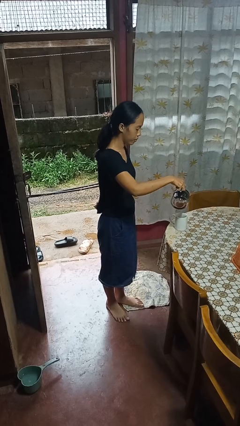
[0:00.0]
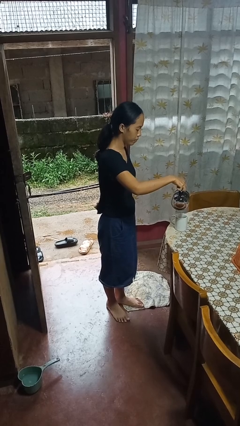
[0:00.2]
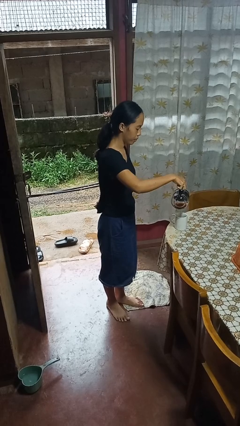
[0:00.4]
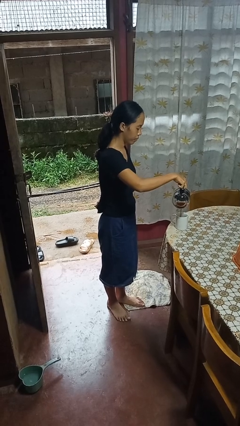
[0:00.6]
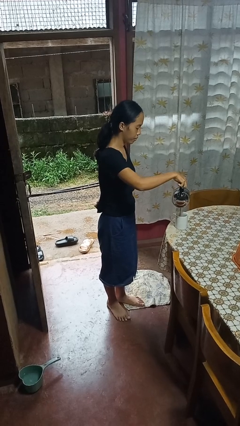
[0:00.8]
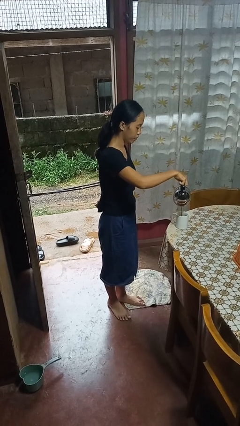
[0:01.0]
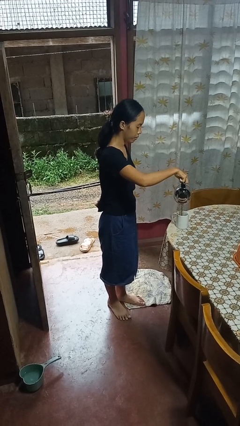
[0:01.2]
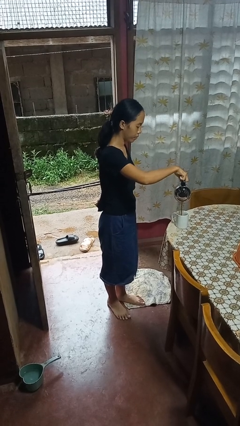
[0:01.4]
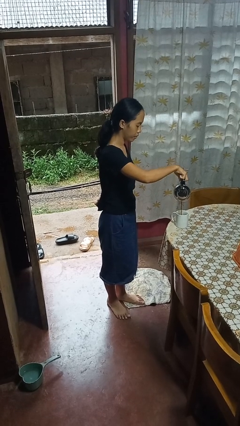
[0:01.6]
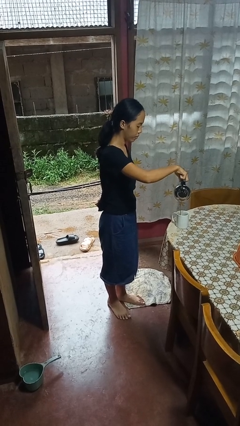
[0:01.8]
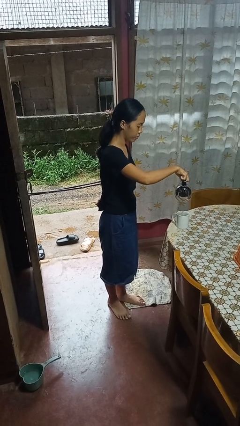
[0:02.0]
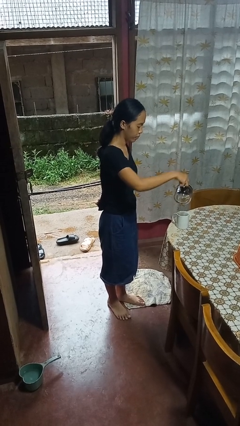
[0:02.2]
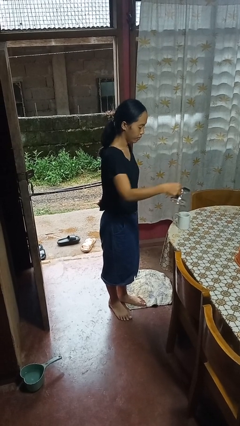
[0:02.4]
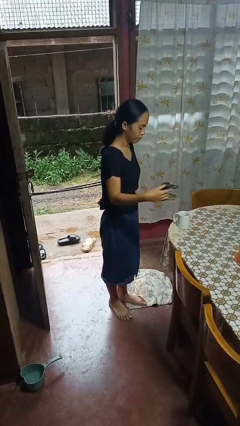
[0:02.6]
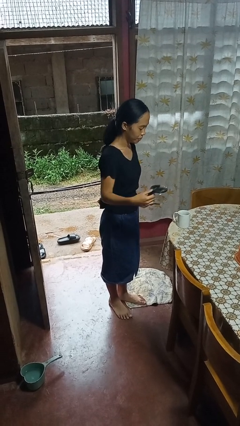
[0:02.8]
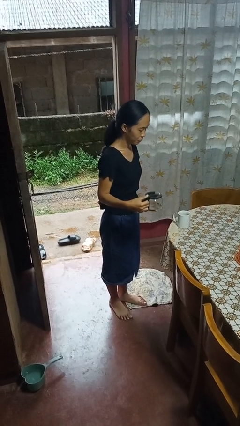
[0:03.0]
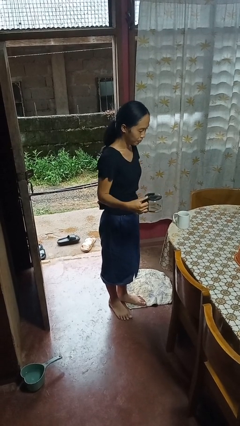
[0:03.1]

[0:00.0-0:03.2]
person pours coffee into mug

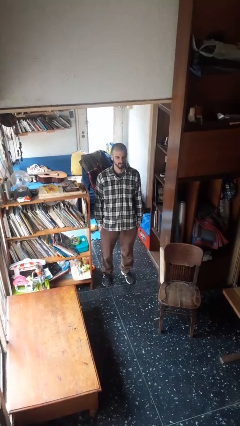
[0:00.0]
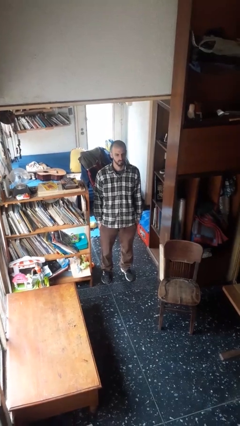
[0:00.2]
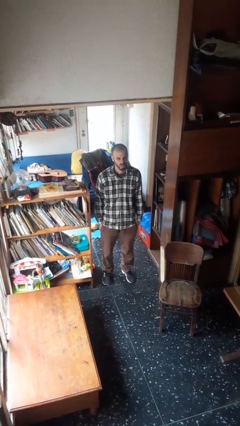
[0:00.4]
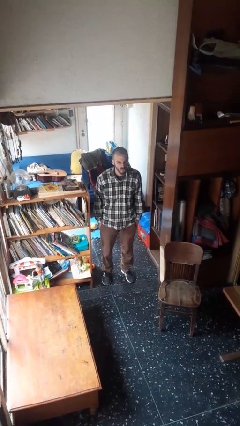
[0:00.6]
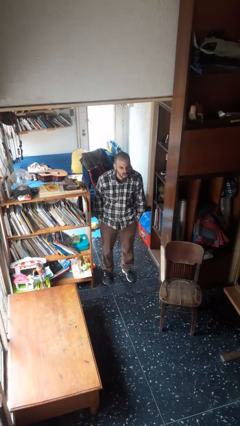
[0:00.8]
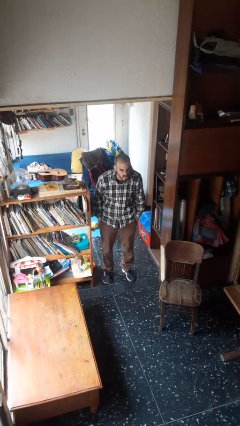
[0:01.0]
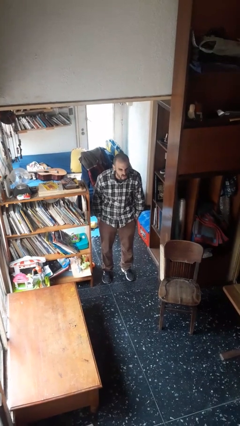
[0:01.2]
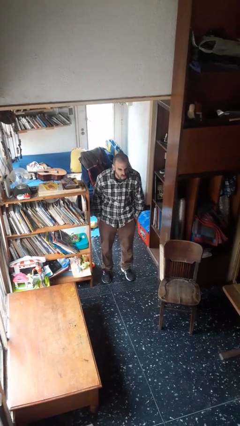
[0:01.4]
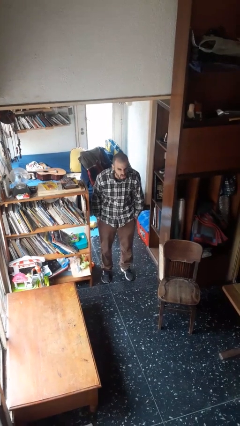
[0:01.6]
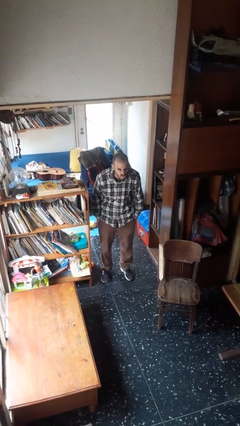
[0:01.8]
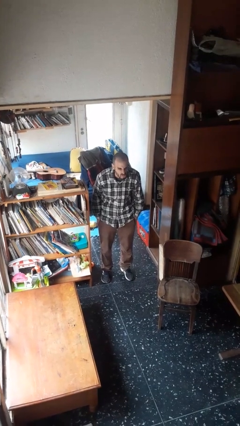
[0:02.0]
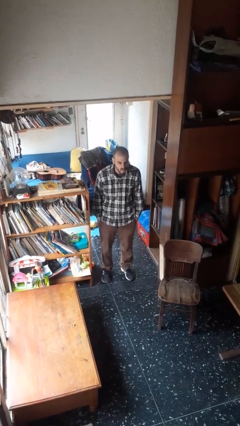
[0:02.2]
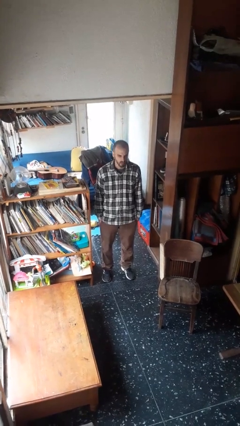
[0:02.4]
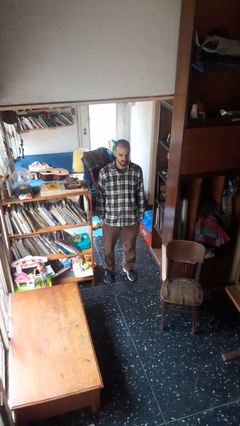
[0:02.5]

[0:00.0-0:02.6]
person sticks out tongue

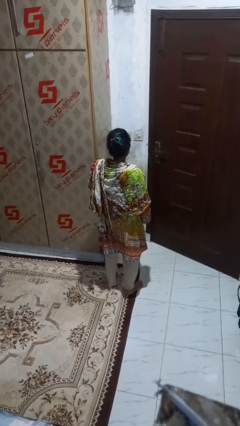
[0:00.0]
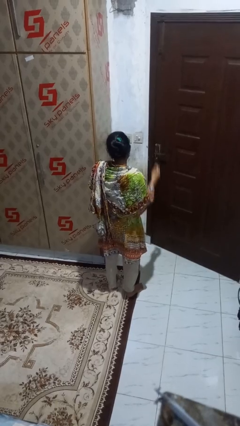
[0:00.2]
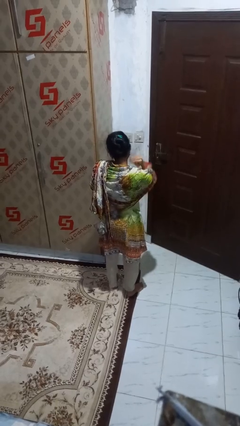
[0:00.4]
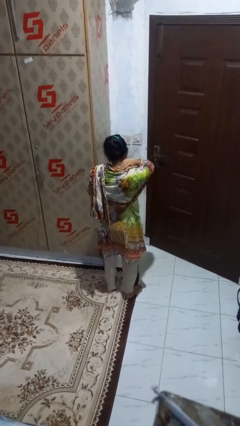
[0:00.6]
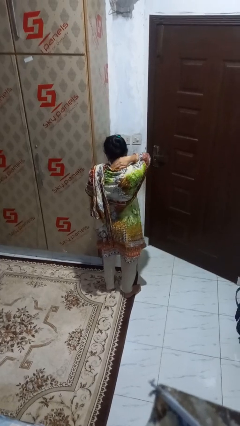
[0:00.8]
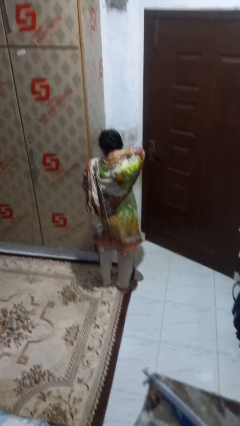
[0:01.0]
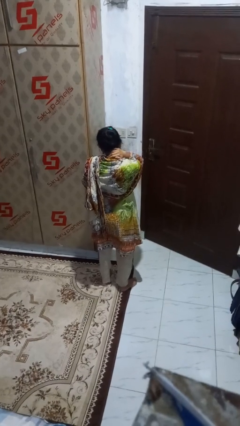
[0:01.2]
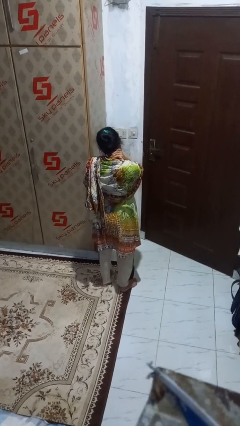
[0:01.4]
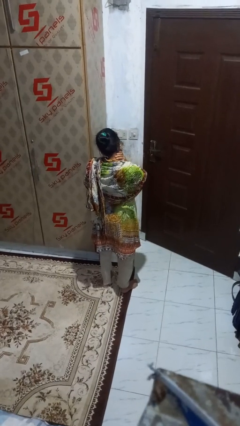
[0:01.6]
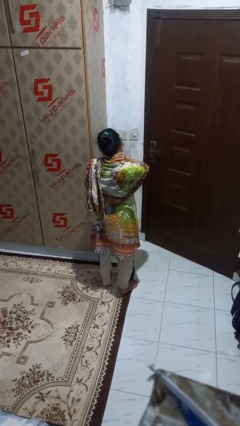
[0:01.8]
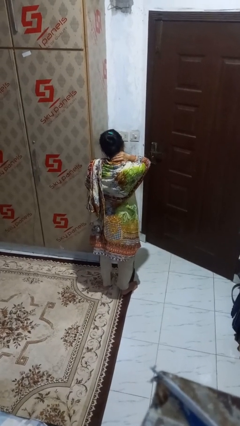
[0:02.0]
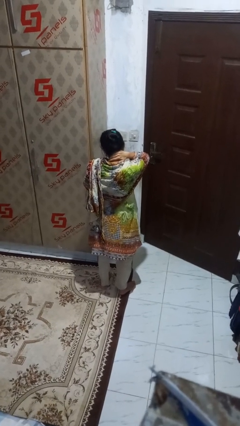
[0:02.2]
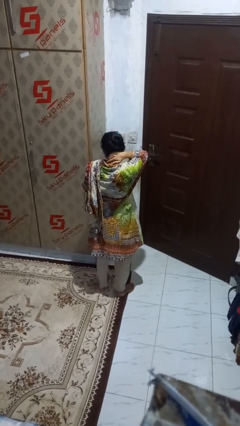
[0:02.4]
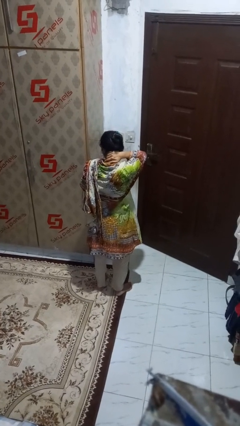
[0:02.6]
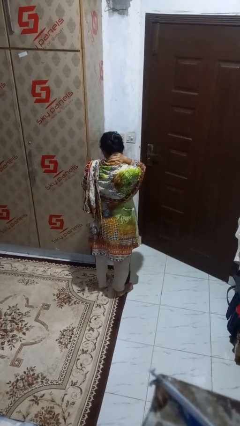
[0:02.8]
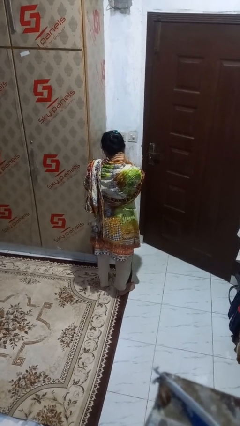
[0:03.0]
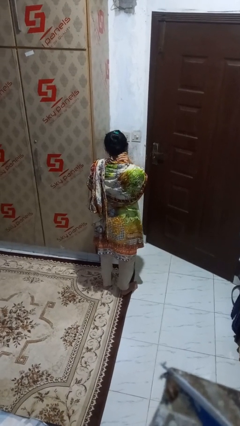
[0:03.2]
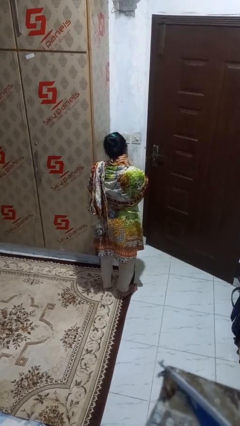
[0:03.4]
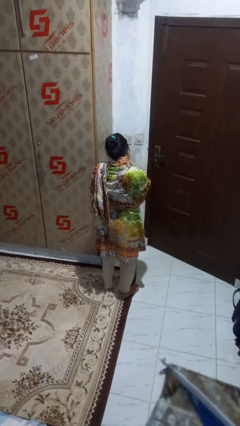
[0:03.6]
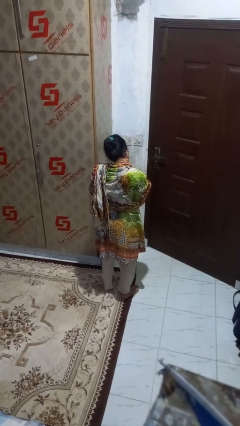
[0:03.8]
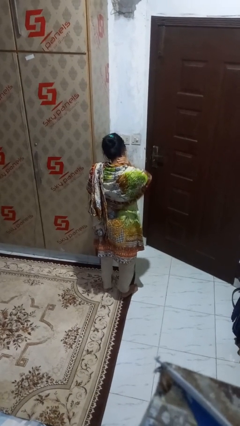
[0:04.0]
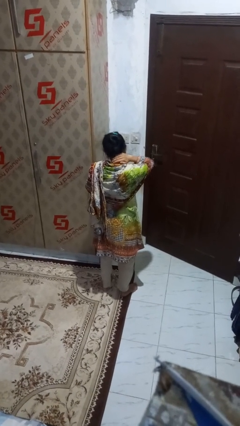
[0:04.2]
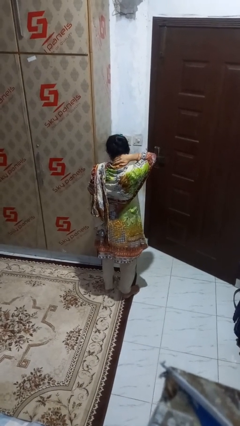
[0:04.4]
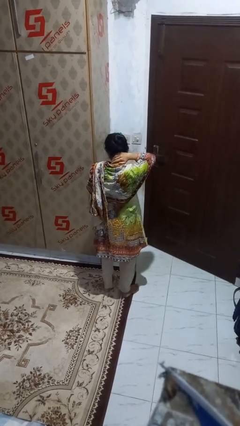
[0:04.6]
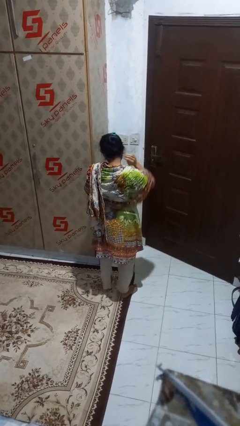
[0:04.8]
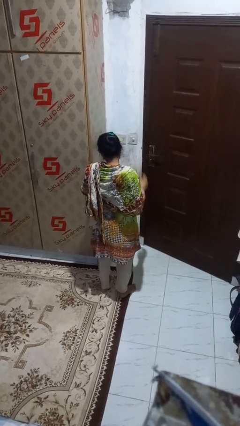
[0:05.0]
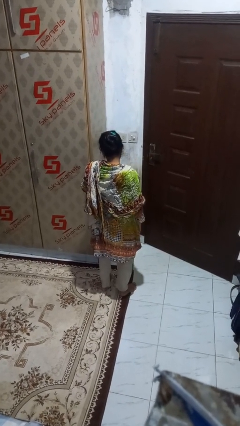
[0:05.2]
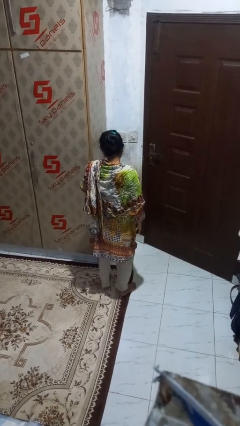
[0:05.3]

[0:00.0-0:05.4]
person rubs neck

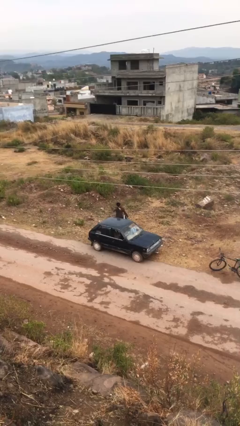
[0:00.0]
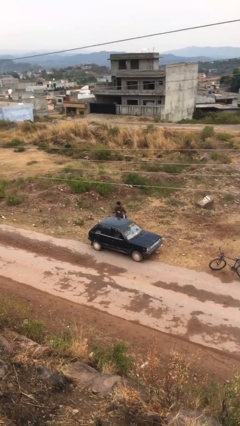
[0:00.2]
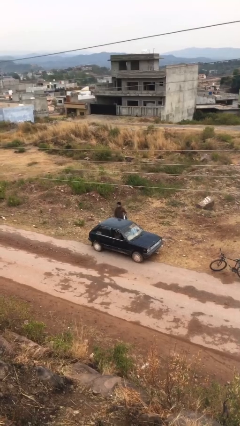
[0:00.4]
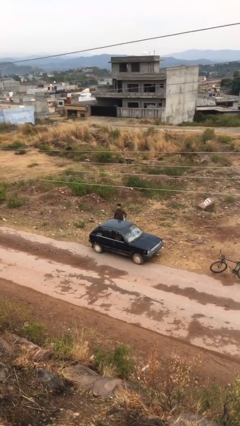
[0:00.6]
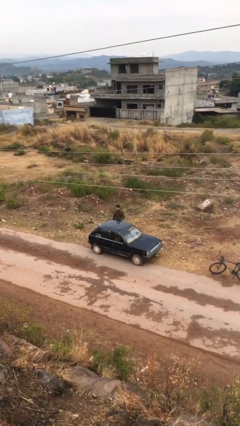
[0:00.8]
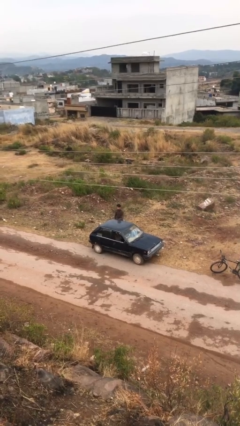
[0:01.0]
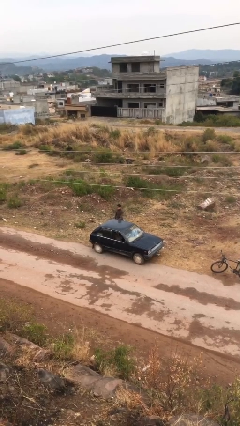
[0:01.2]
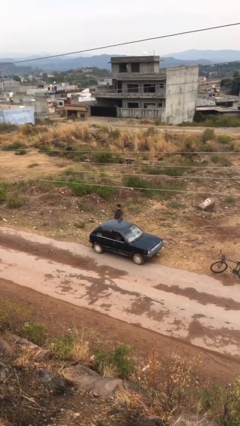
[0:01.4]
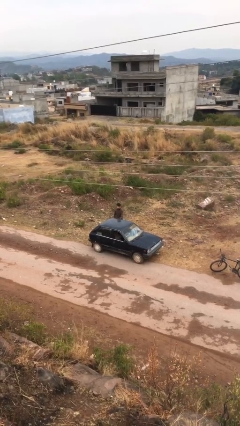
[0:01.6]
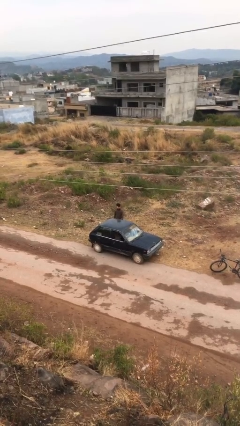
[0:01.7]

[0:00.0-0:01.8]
person closes car door

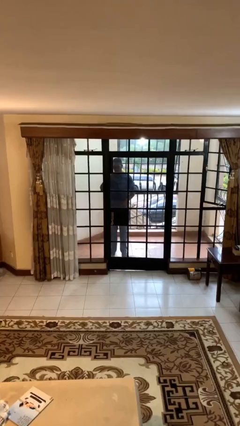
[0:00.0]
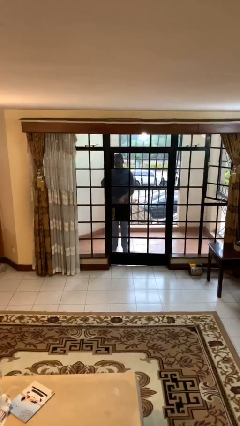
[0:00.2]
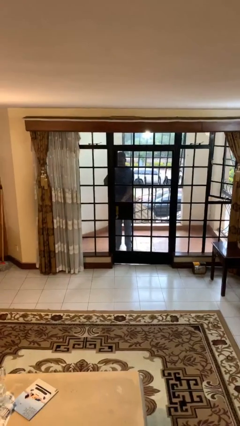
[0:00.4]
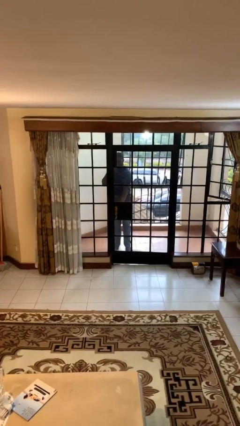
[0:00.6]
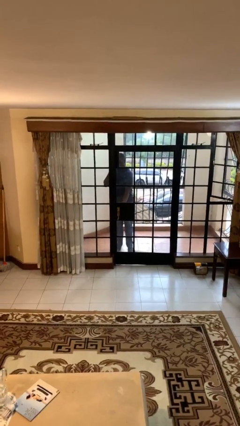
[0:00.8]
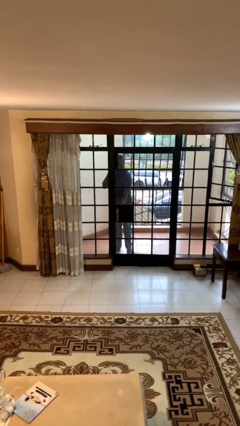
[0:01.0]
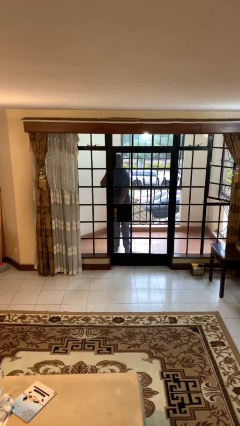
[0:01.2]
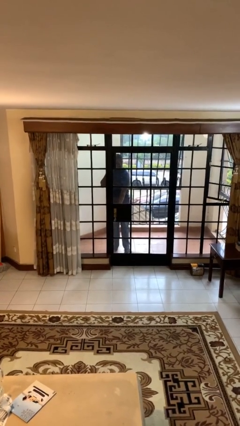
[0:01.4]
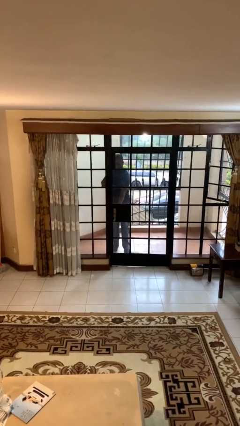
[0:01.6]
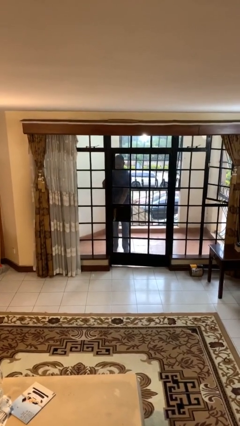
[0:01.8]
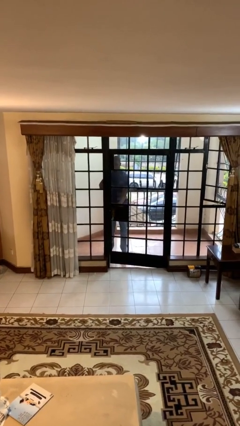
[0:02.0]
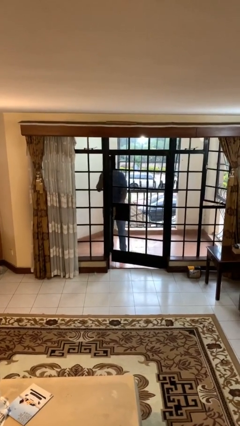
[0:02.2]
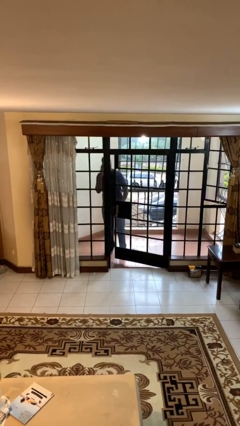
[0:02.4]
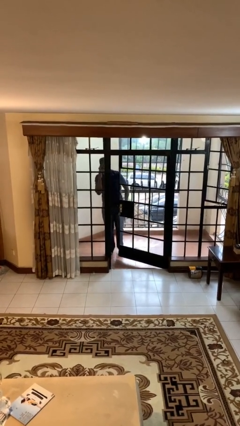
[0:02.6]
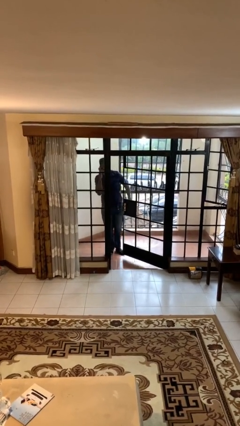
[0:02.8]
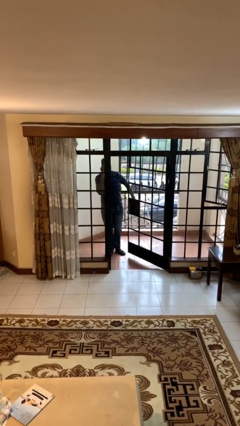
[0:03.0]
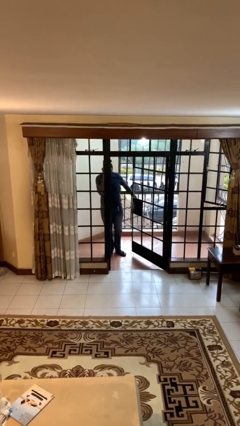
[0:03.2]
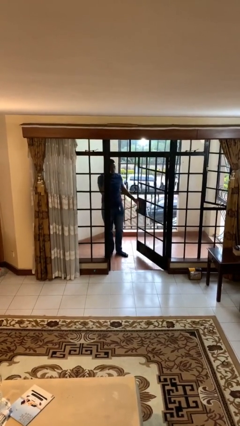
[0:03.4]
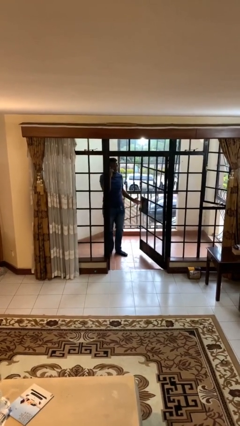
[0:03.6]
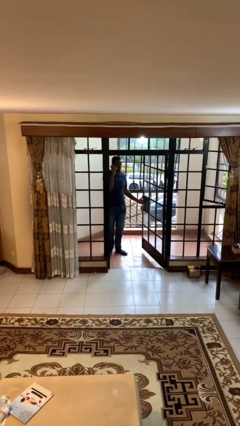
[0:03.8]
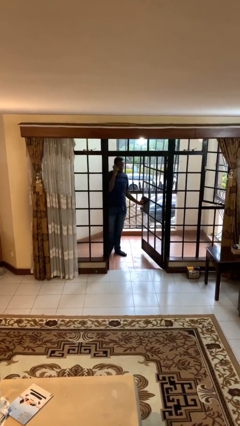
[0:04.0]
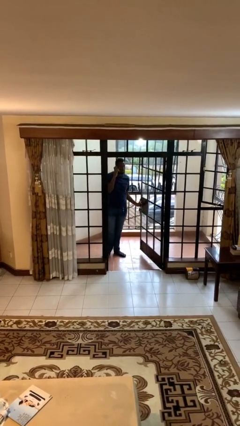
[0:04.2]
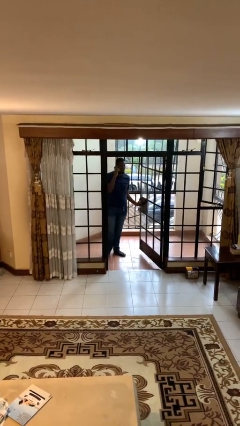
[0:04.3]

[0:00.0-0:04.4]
person opens facility door

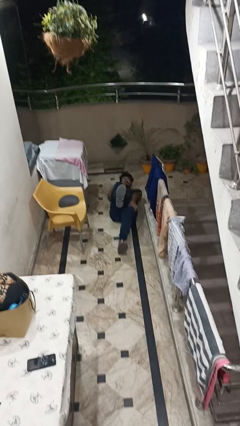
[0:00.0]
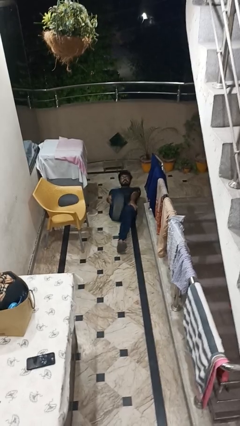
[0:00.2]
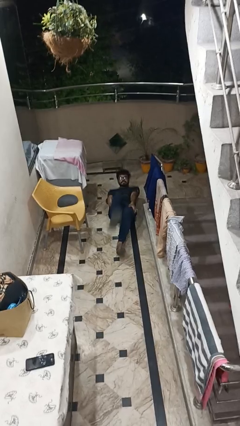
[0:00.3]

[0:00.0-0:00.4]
person stands up from floor
